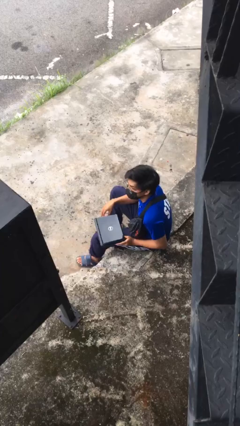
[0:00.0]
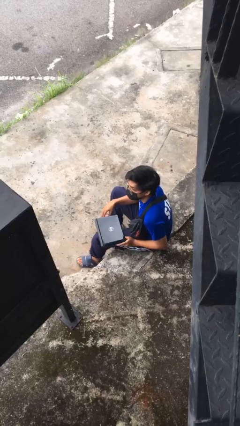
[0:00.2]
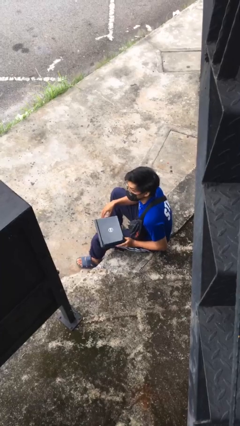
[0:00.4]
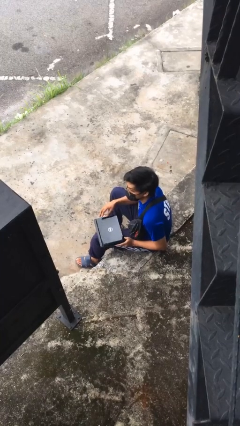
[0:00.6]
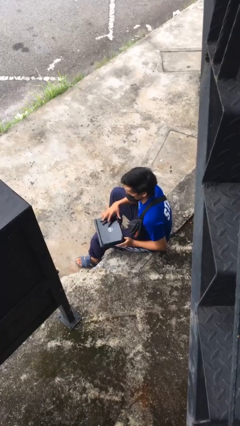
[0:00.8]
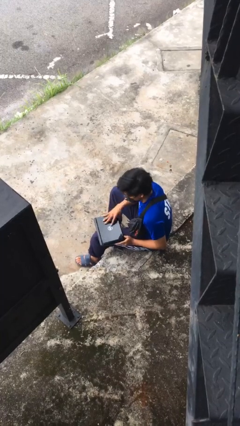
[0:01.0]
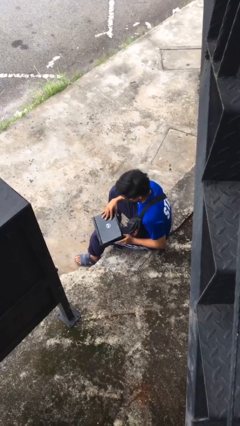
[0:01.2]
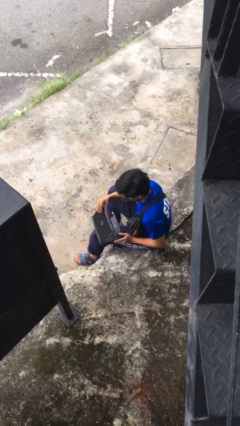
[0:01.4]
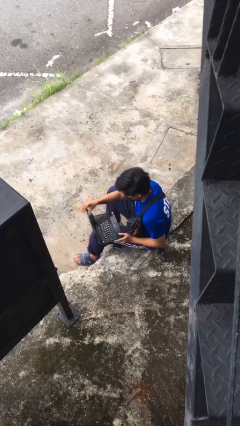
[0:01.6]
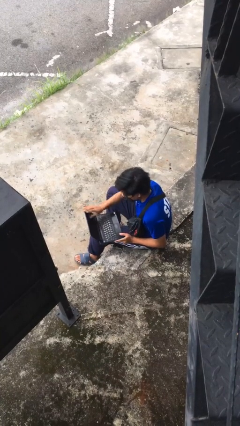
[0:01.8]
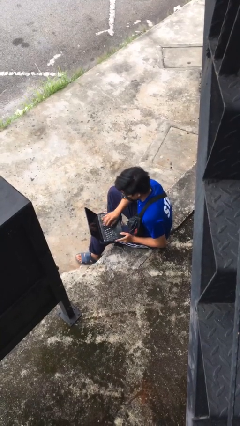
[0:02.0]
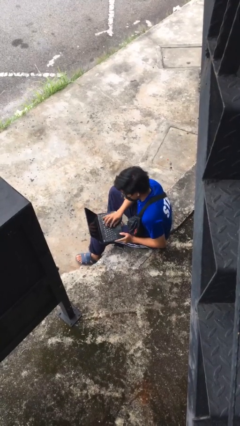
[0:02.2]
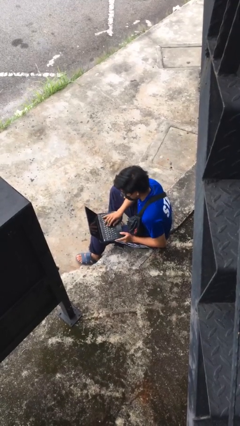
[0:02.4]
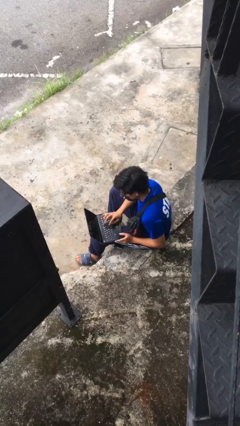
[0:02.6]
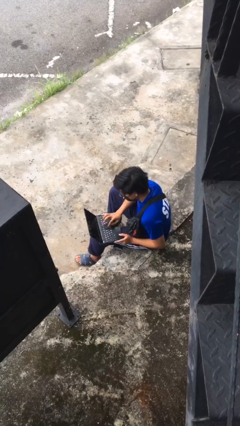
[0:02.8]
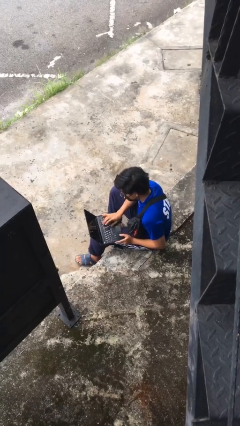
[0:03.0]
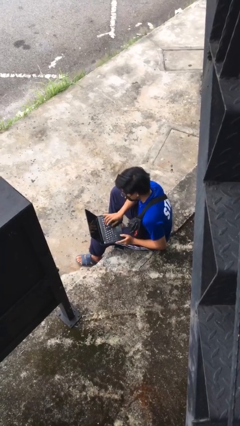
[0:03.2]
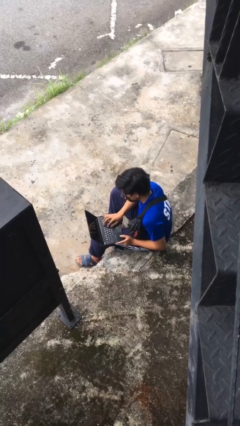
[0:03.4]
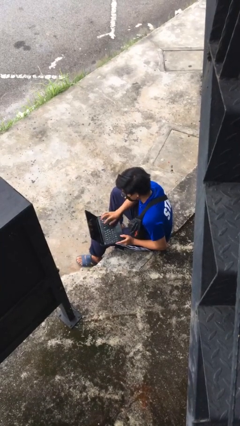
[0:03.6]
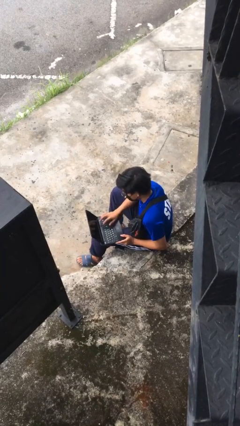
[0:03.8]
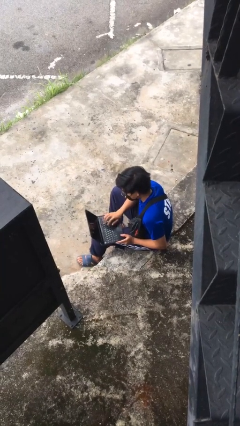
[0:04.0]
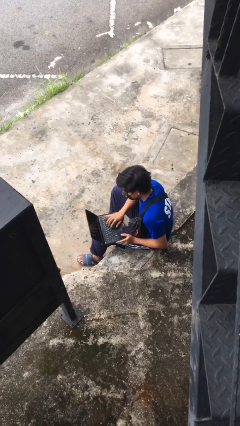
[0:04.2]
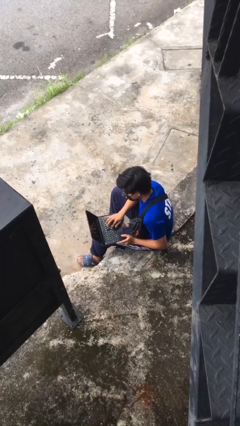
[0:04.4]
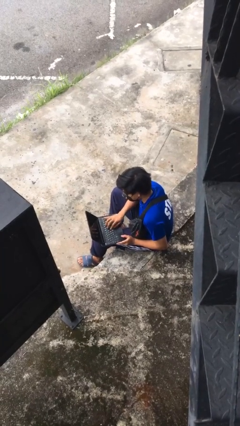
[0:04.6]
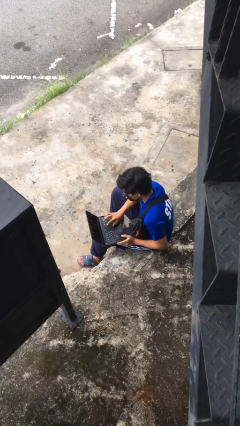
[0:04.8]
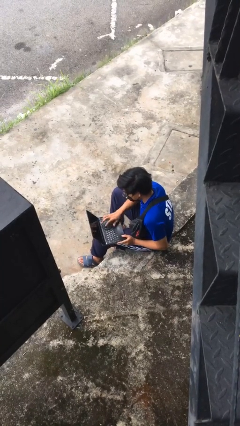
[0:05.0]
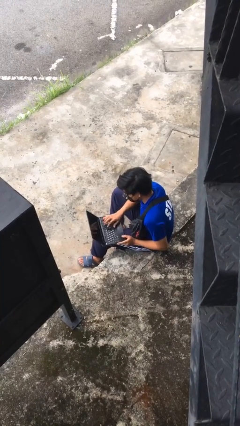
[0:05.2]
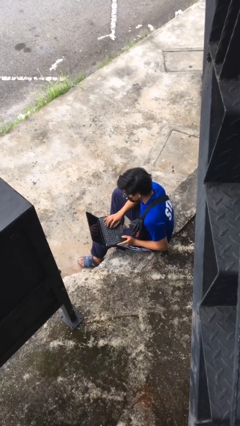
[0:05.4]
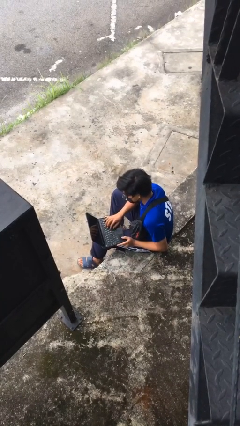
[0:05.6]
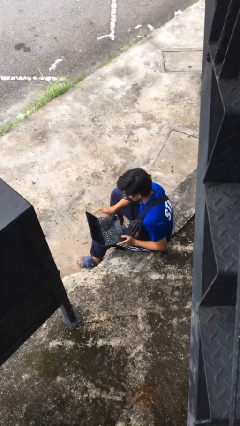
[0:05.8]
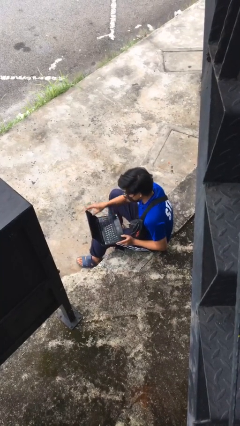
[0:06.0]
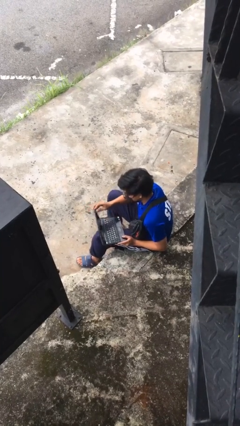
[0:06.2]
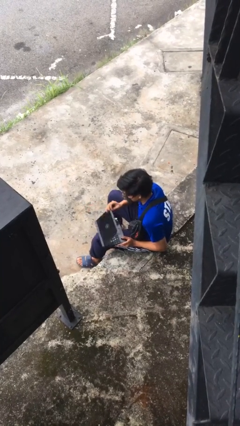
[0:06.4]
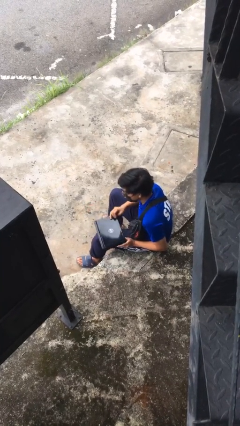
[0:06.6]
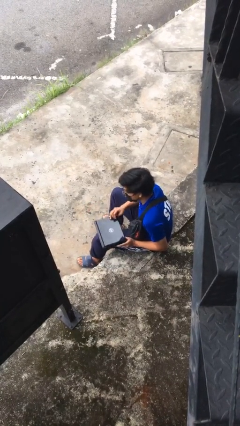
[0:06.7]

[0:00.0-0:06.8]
person interacts with laptop

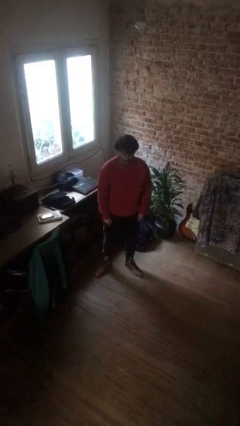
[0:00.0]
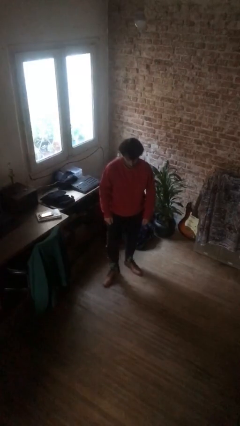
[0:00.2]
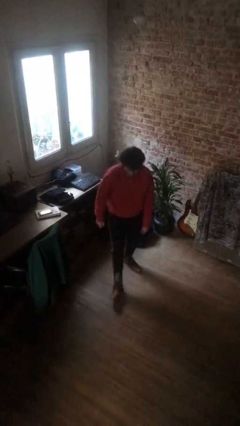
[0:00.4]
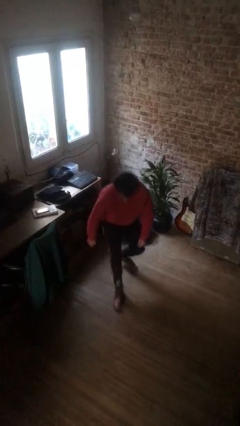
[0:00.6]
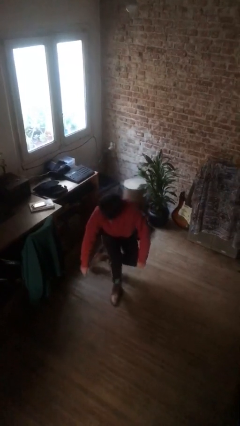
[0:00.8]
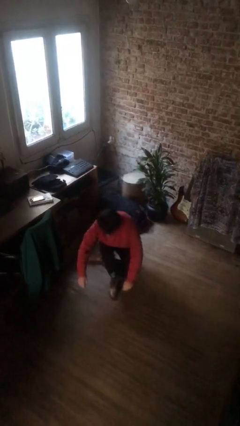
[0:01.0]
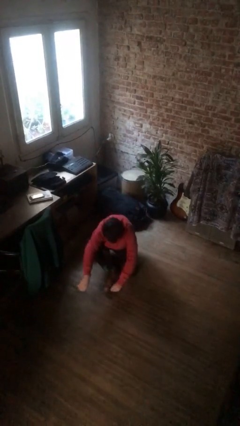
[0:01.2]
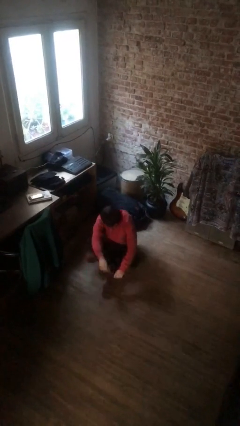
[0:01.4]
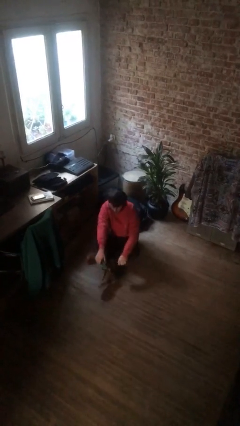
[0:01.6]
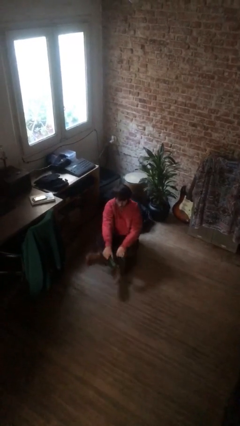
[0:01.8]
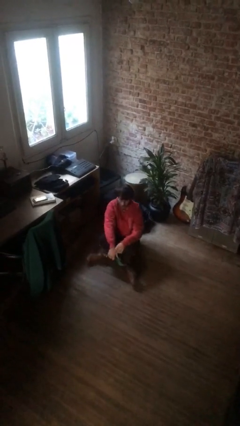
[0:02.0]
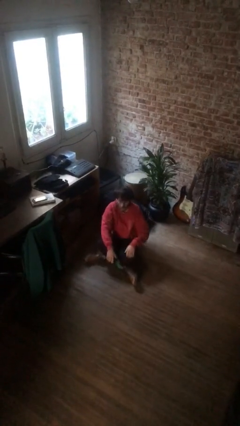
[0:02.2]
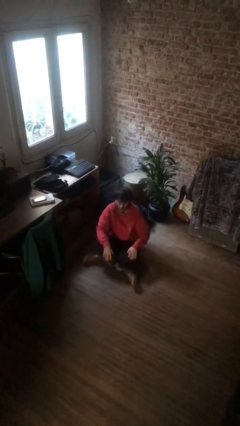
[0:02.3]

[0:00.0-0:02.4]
person sits crisscross

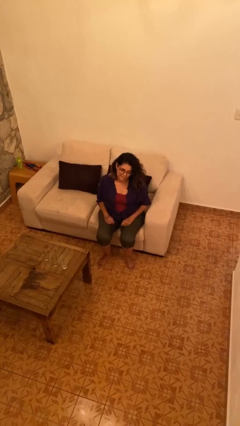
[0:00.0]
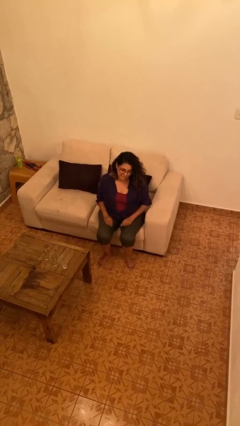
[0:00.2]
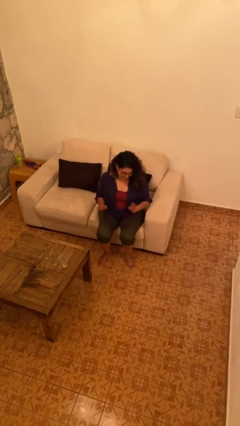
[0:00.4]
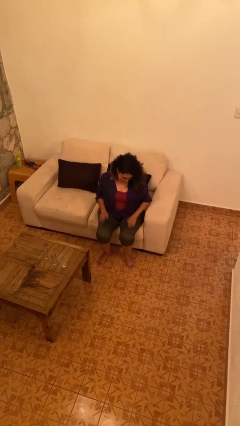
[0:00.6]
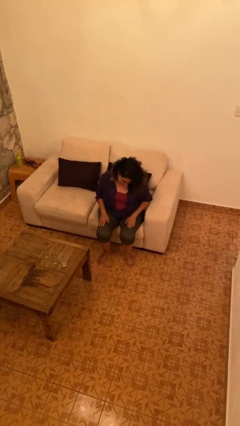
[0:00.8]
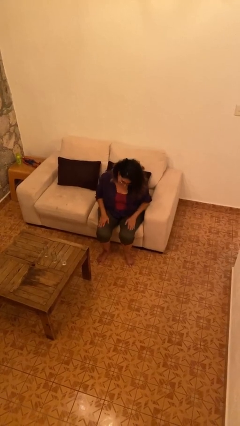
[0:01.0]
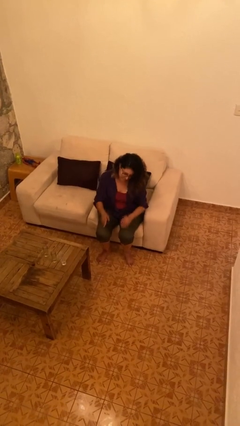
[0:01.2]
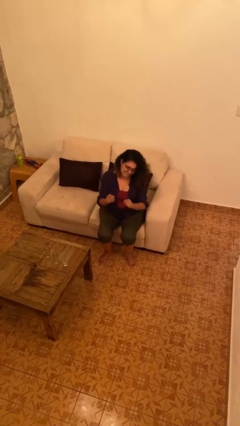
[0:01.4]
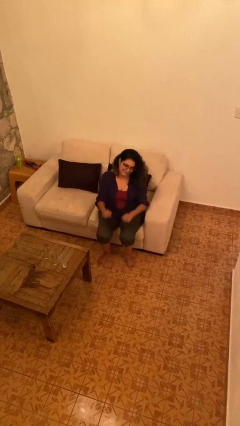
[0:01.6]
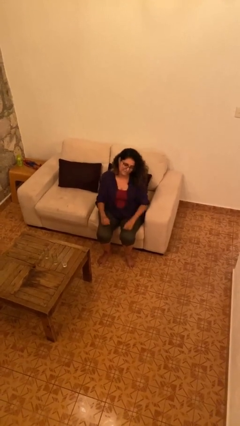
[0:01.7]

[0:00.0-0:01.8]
person slaps hands on thighs

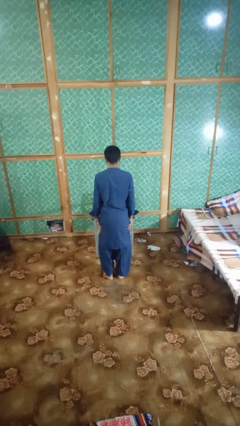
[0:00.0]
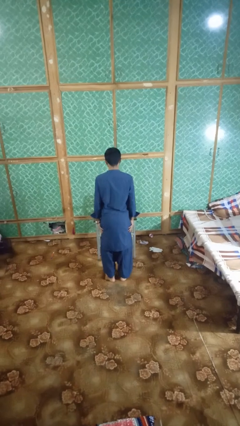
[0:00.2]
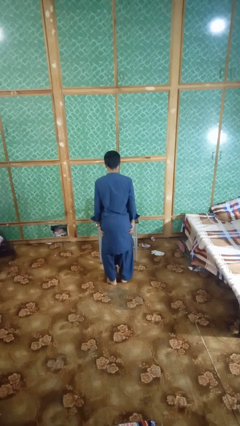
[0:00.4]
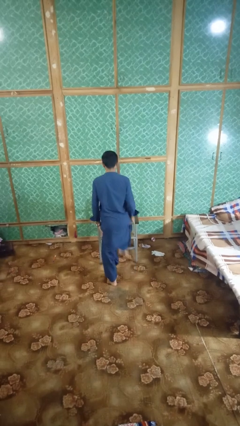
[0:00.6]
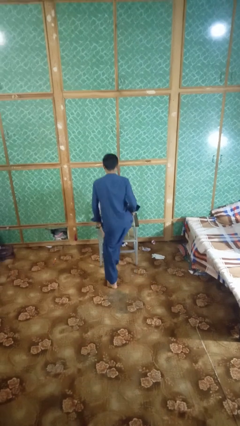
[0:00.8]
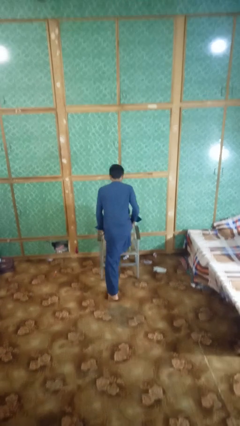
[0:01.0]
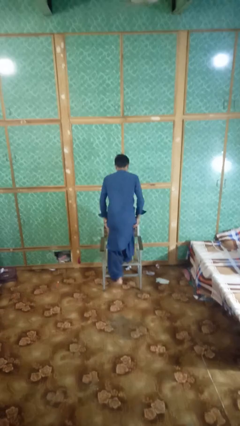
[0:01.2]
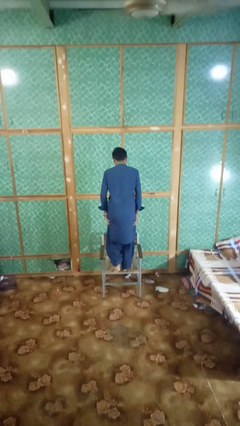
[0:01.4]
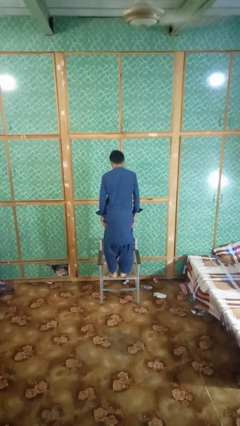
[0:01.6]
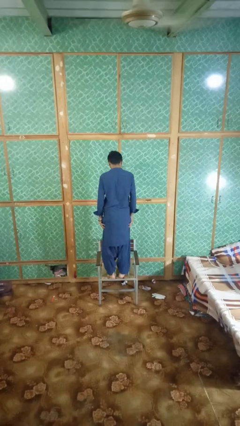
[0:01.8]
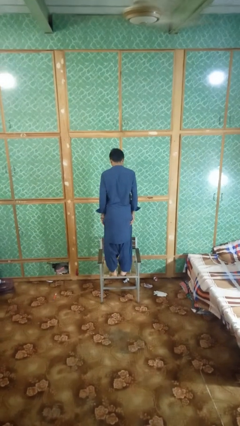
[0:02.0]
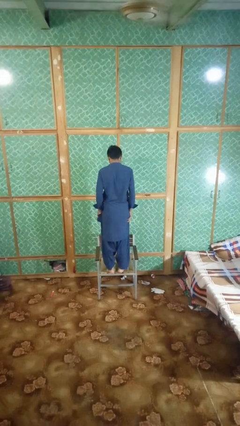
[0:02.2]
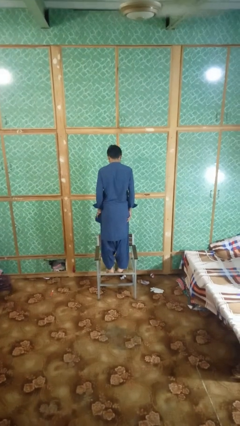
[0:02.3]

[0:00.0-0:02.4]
person climbs on chair

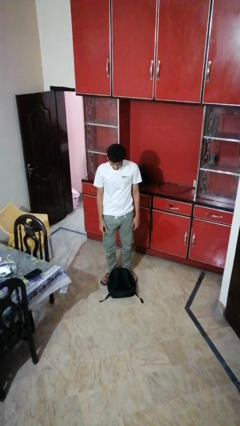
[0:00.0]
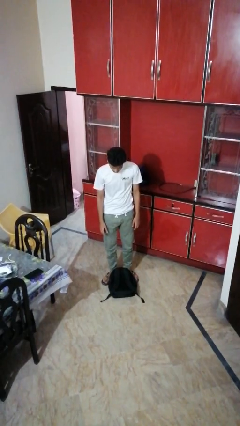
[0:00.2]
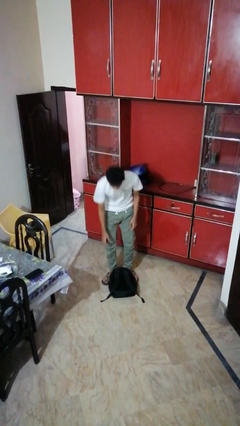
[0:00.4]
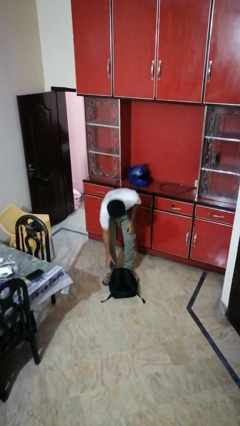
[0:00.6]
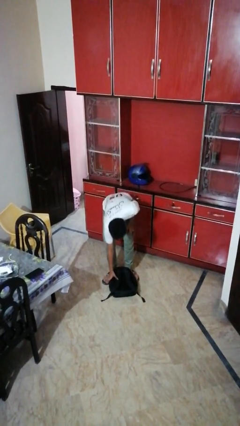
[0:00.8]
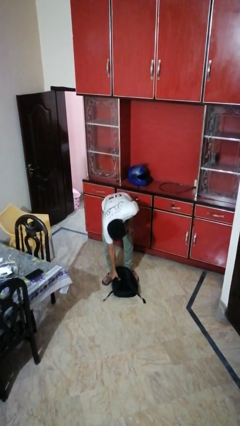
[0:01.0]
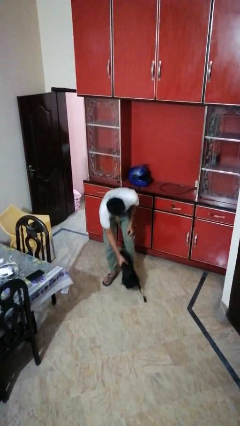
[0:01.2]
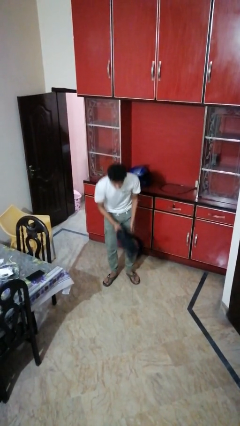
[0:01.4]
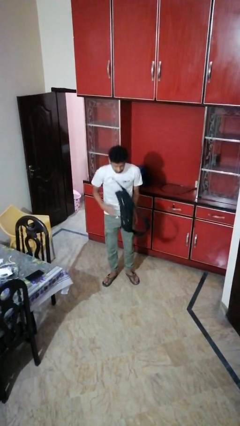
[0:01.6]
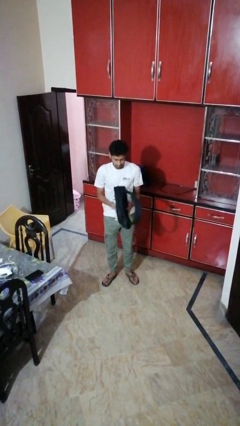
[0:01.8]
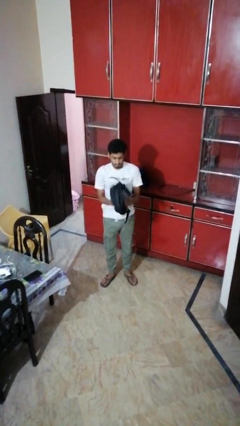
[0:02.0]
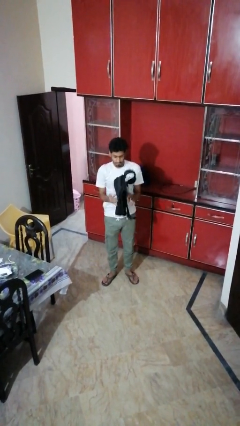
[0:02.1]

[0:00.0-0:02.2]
person picks up object from floor

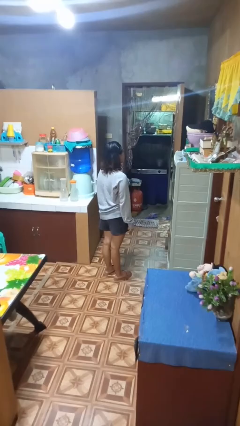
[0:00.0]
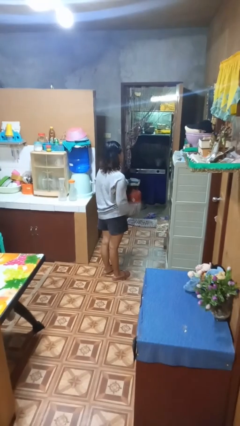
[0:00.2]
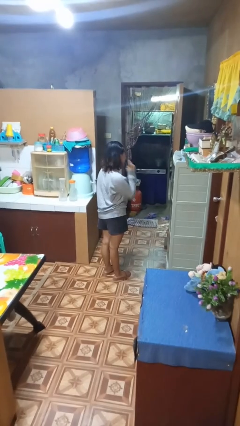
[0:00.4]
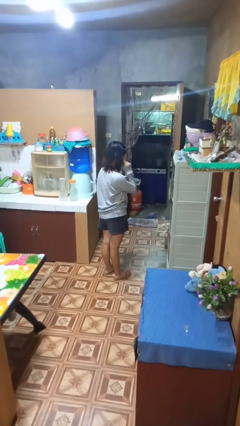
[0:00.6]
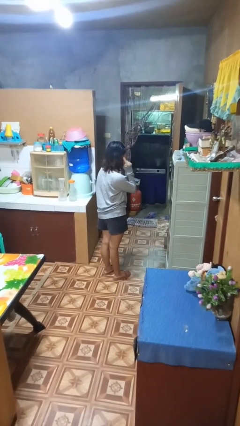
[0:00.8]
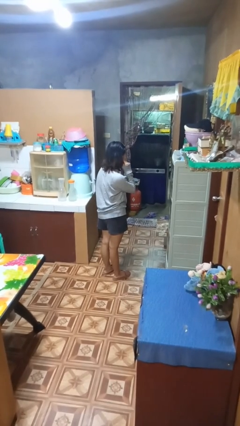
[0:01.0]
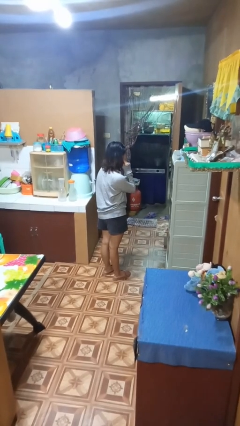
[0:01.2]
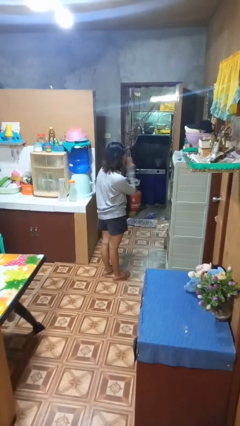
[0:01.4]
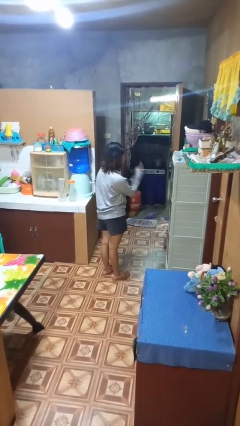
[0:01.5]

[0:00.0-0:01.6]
person gestures listen closely

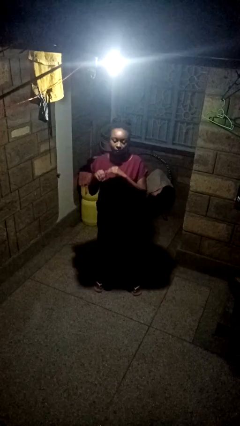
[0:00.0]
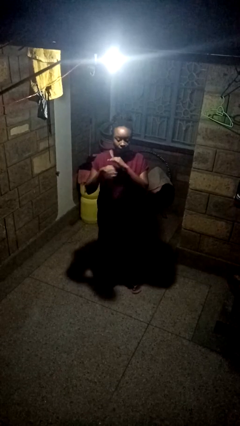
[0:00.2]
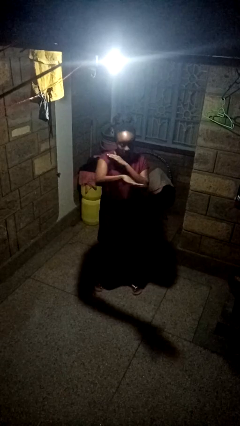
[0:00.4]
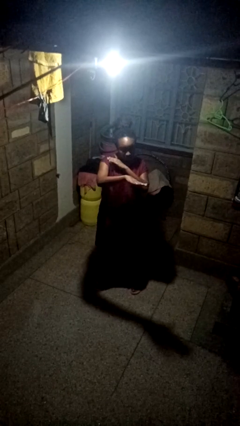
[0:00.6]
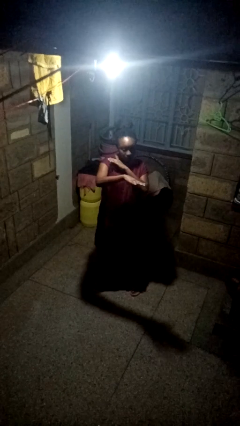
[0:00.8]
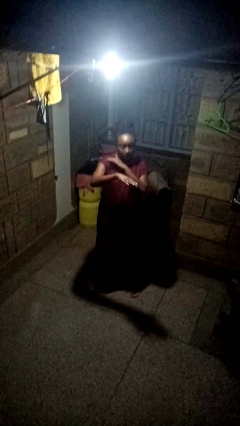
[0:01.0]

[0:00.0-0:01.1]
person karate chop
